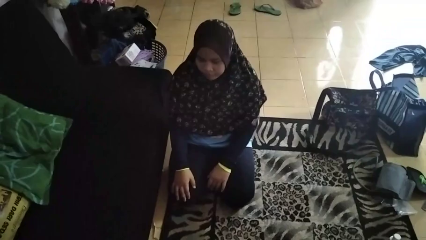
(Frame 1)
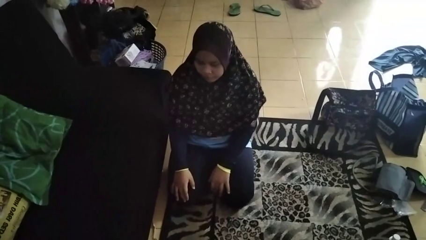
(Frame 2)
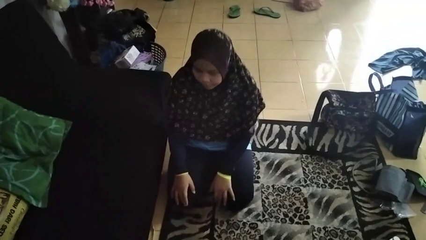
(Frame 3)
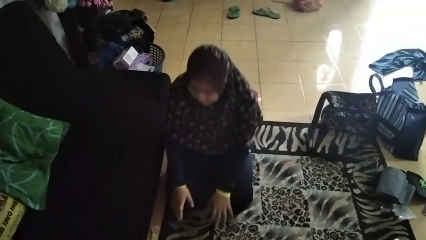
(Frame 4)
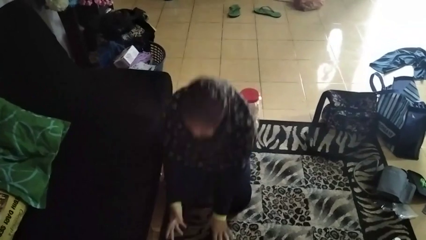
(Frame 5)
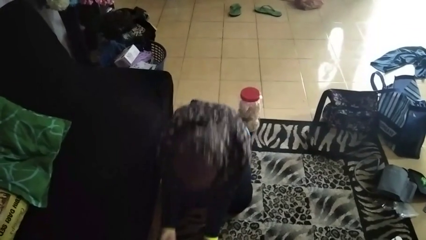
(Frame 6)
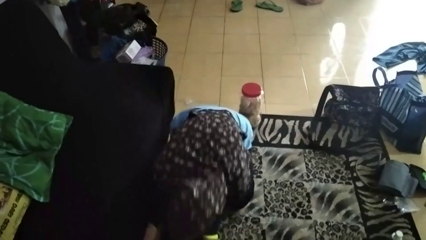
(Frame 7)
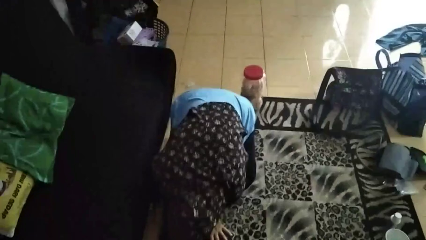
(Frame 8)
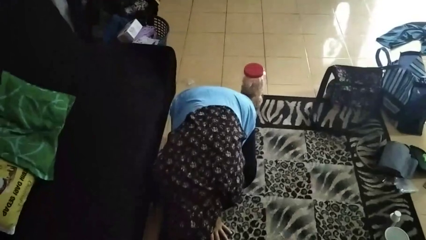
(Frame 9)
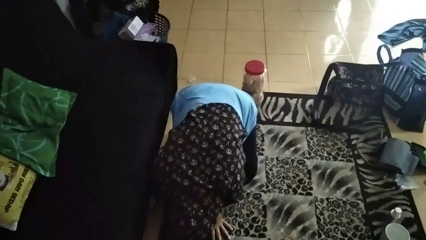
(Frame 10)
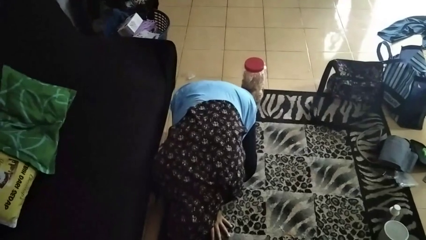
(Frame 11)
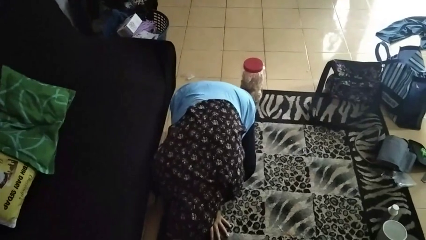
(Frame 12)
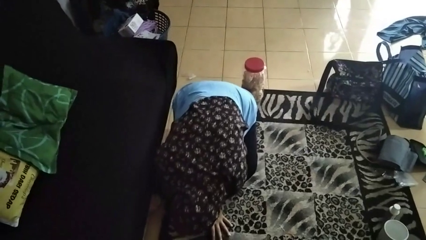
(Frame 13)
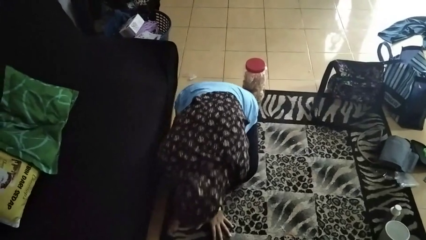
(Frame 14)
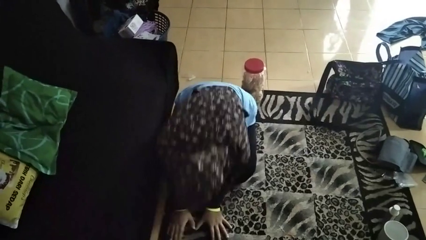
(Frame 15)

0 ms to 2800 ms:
person searches under couch

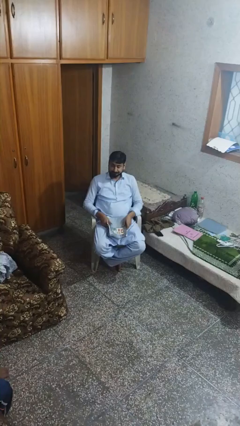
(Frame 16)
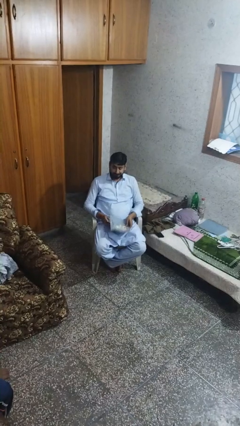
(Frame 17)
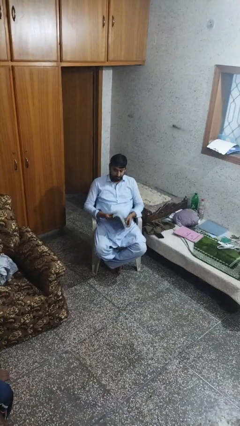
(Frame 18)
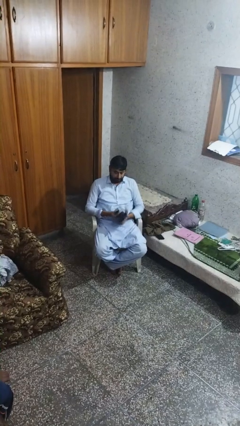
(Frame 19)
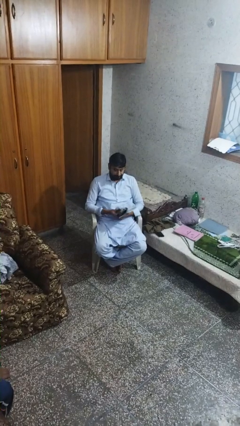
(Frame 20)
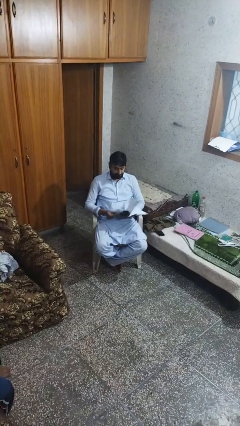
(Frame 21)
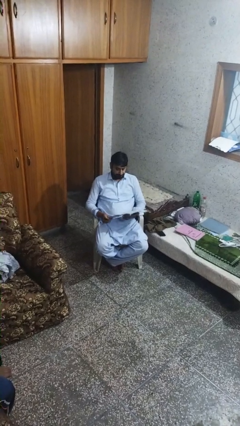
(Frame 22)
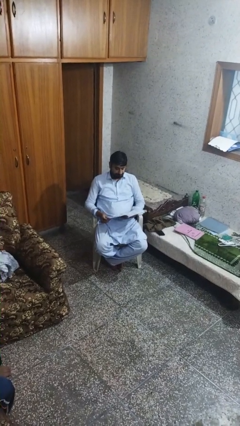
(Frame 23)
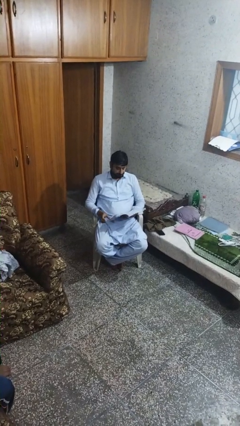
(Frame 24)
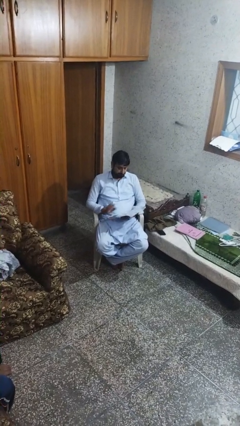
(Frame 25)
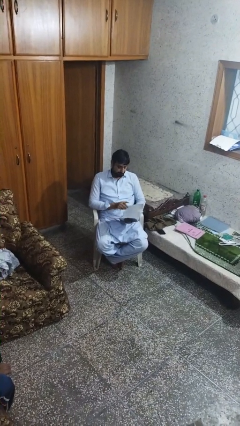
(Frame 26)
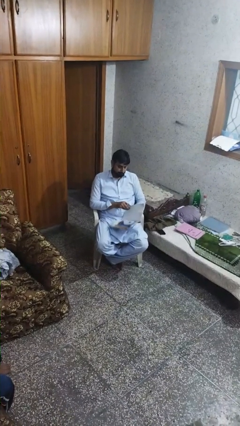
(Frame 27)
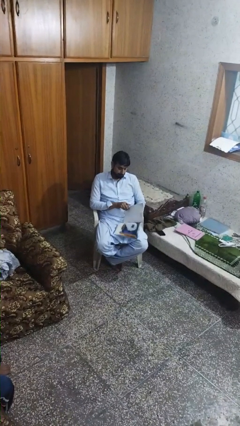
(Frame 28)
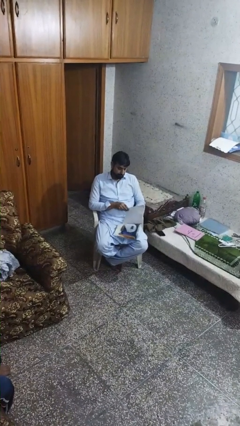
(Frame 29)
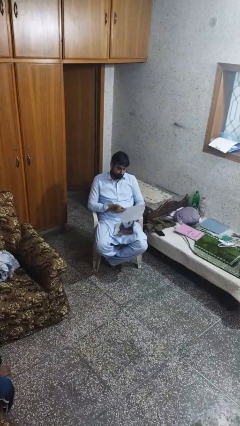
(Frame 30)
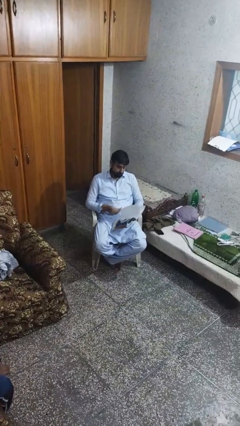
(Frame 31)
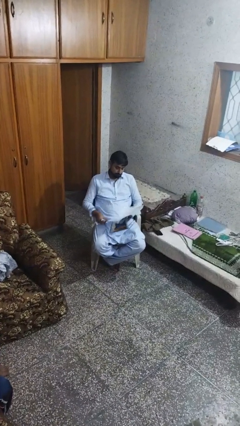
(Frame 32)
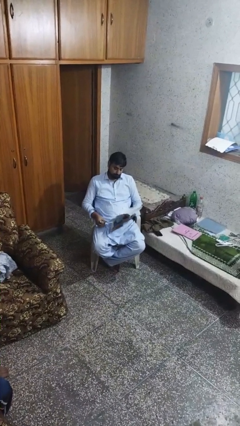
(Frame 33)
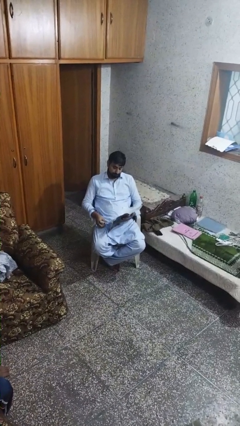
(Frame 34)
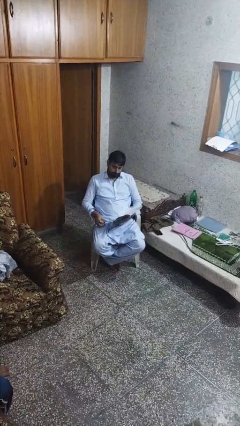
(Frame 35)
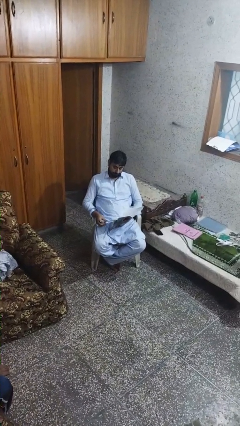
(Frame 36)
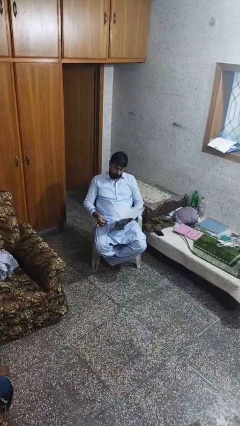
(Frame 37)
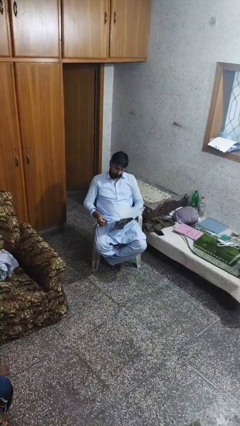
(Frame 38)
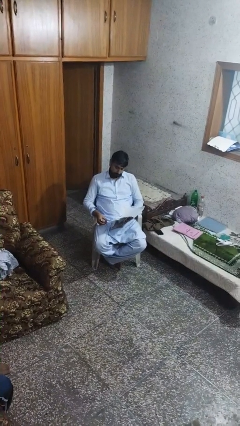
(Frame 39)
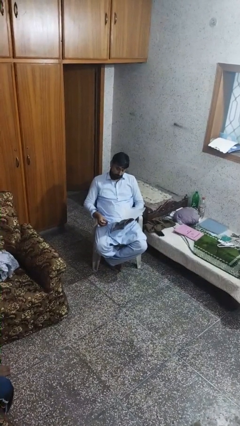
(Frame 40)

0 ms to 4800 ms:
person reads book

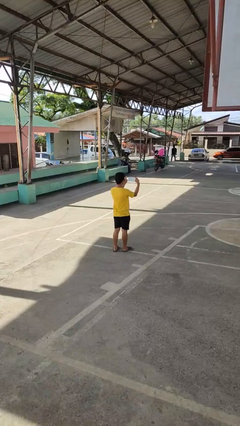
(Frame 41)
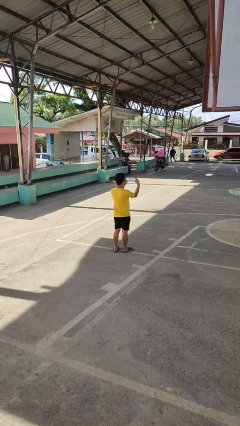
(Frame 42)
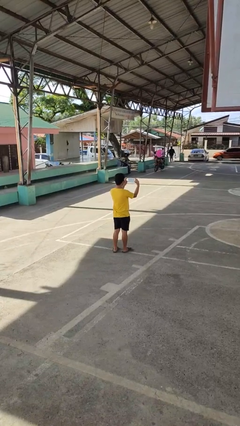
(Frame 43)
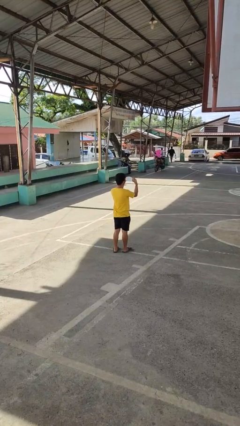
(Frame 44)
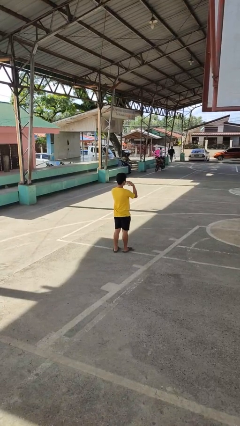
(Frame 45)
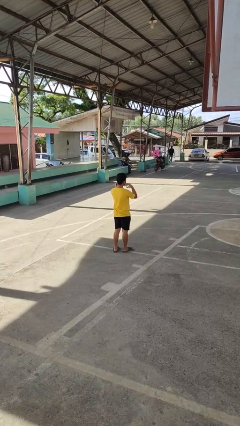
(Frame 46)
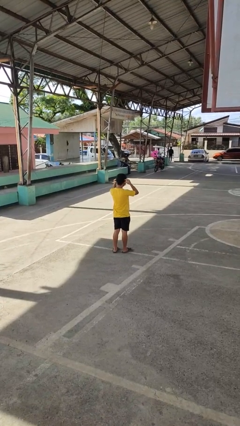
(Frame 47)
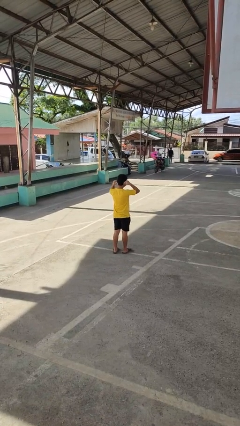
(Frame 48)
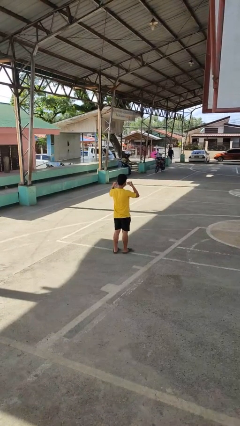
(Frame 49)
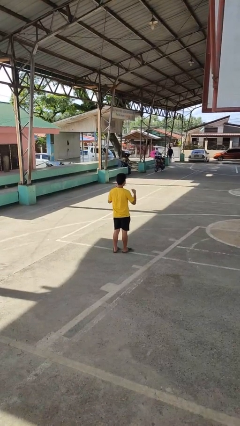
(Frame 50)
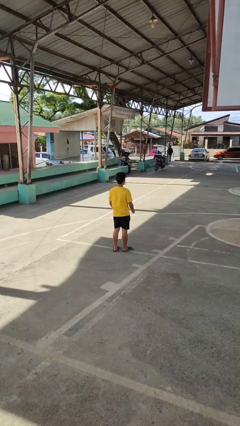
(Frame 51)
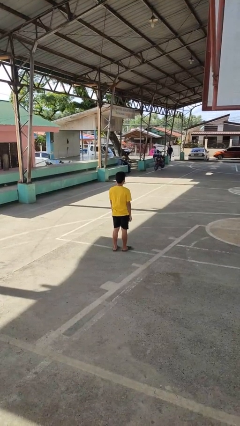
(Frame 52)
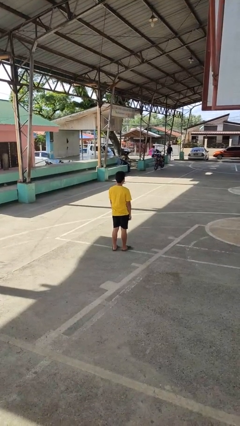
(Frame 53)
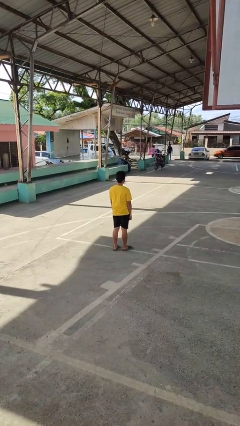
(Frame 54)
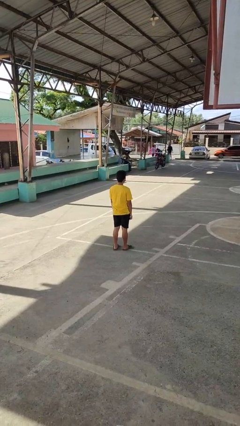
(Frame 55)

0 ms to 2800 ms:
person puts on facemask

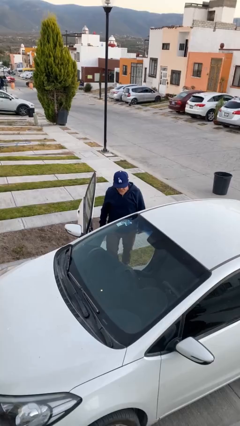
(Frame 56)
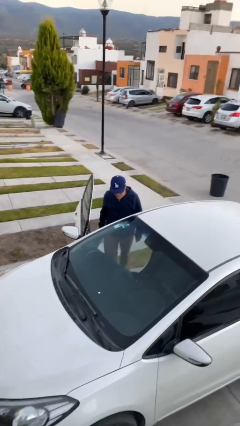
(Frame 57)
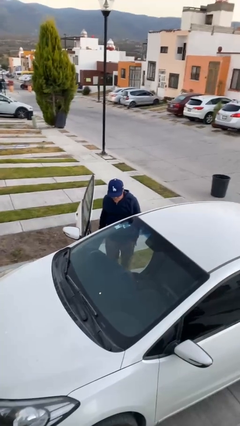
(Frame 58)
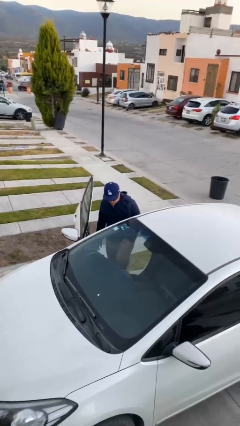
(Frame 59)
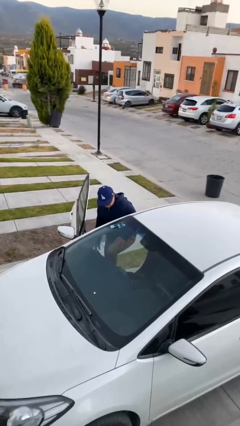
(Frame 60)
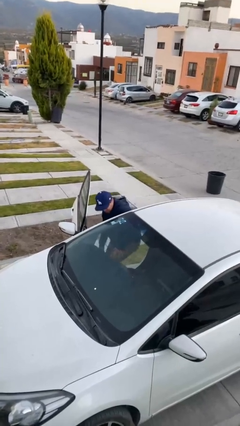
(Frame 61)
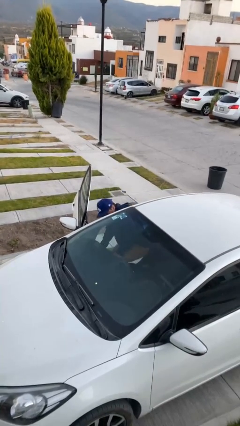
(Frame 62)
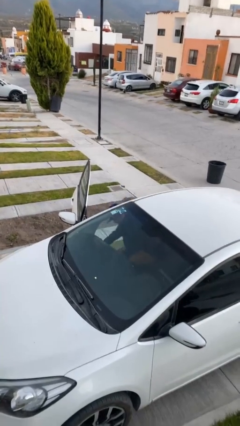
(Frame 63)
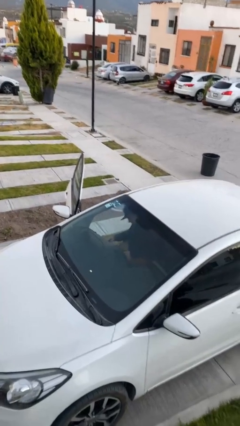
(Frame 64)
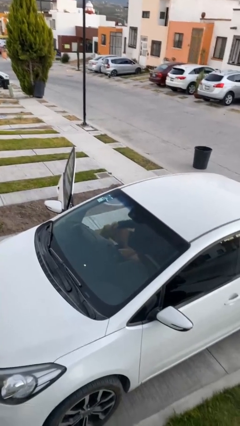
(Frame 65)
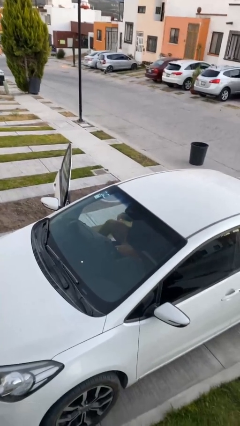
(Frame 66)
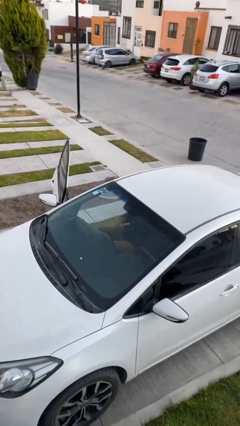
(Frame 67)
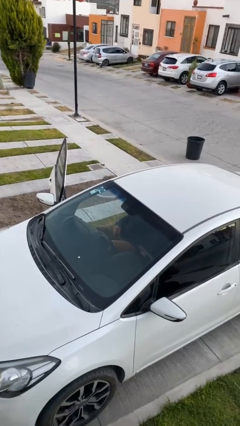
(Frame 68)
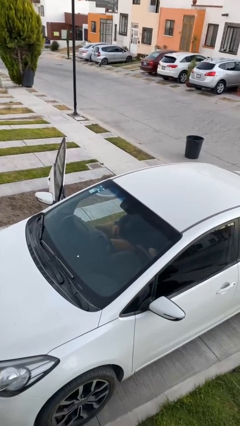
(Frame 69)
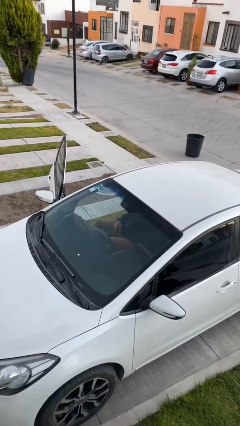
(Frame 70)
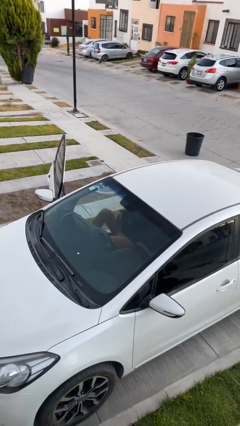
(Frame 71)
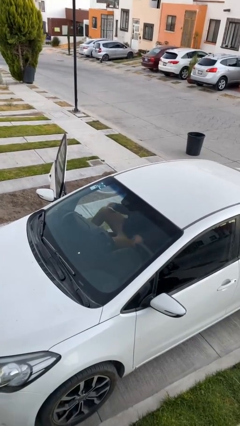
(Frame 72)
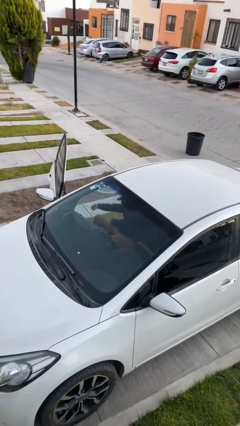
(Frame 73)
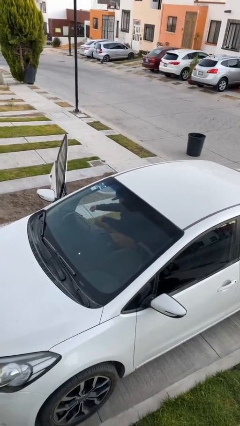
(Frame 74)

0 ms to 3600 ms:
person enters car

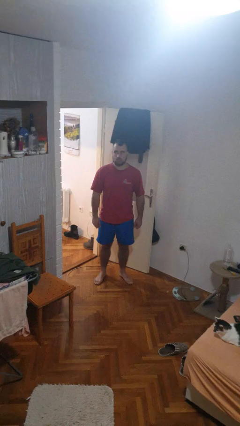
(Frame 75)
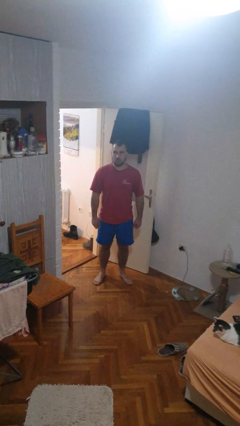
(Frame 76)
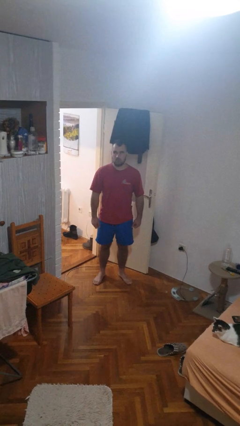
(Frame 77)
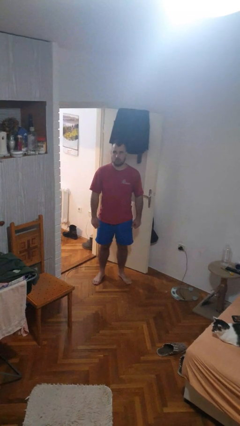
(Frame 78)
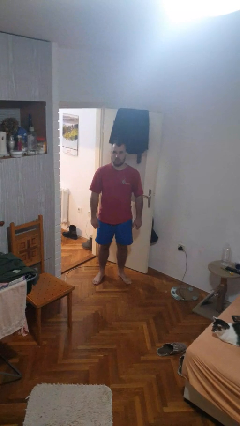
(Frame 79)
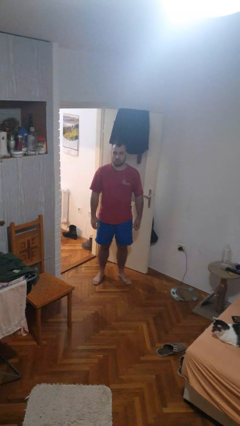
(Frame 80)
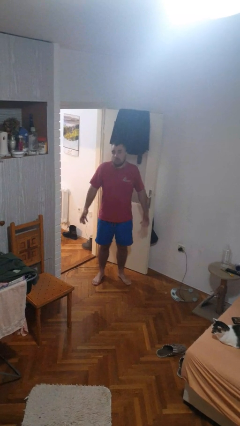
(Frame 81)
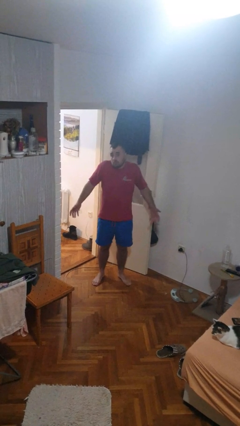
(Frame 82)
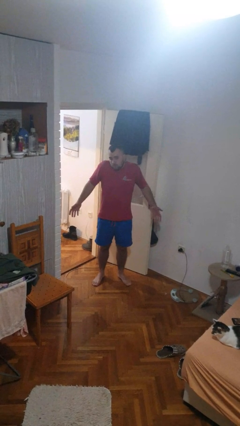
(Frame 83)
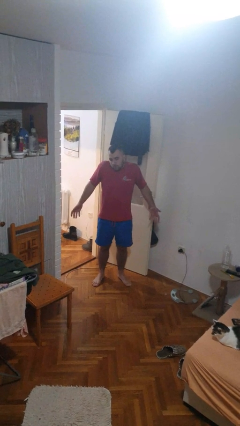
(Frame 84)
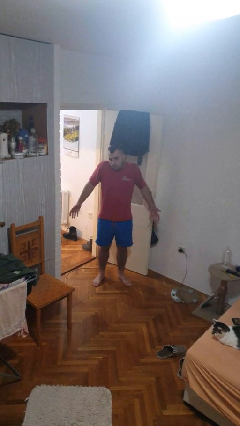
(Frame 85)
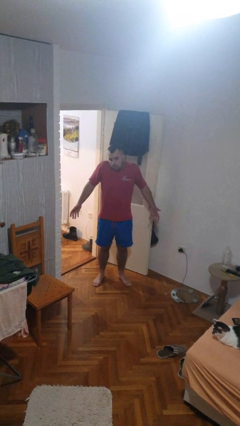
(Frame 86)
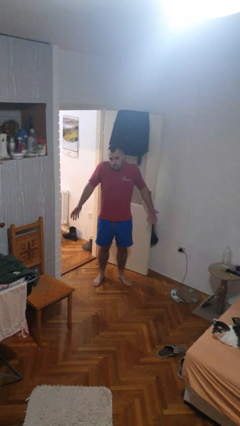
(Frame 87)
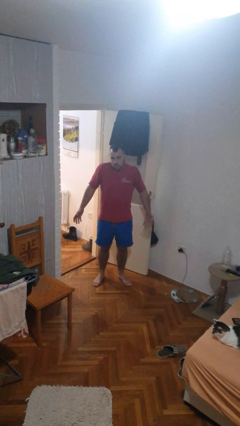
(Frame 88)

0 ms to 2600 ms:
person shrugs

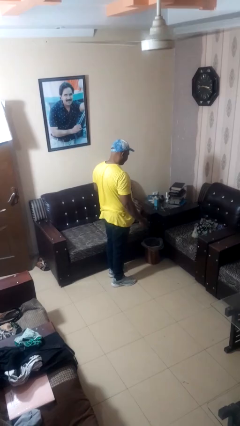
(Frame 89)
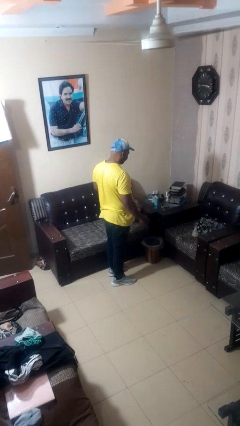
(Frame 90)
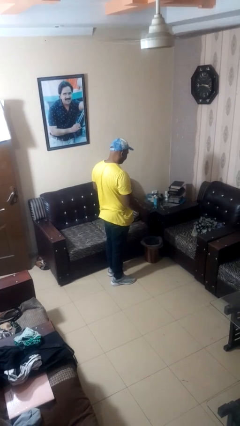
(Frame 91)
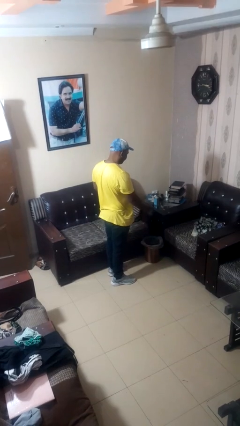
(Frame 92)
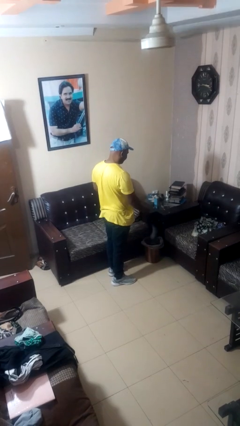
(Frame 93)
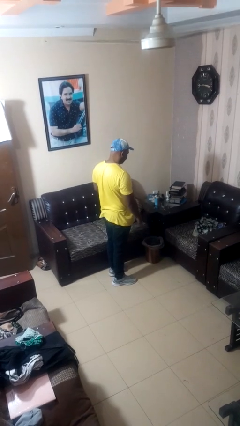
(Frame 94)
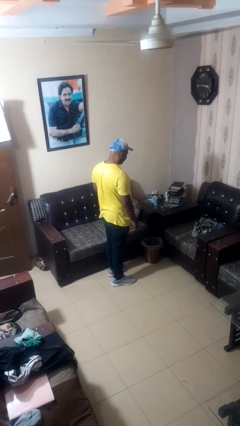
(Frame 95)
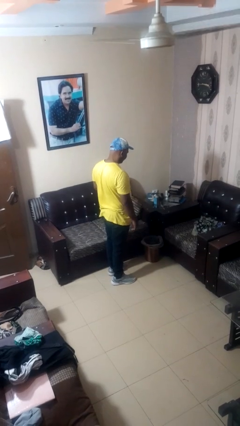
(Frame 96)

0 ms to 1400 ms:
person discards trash
